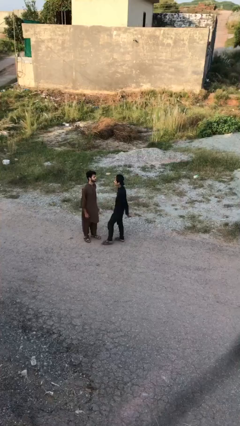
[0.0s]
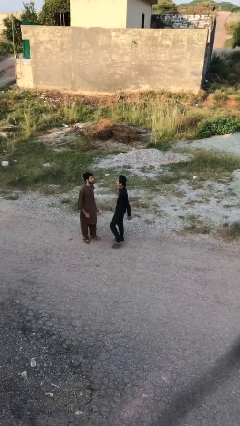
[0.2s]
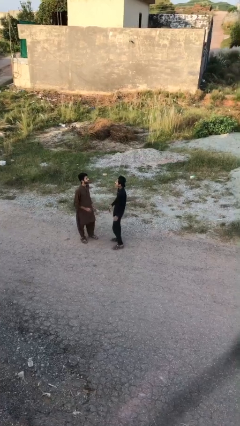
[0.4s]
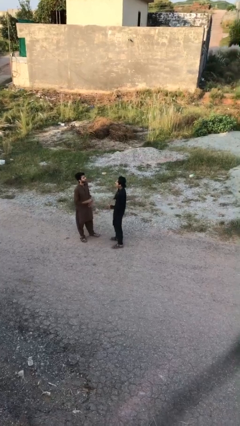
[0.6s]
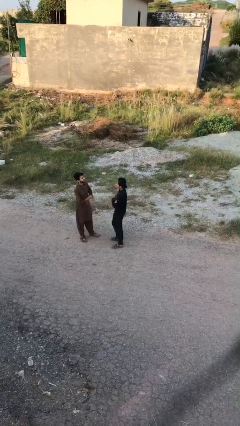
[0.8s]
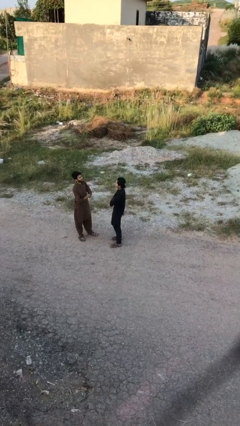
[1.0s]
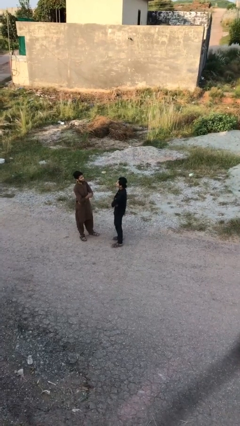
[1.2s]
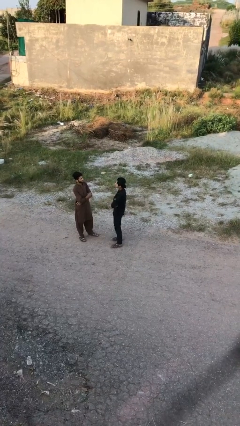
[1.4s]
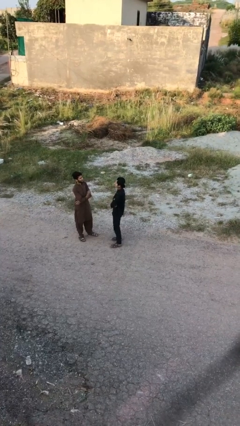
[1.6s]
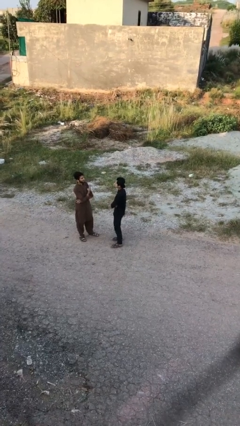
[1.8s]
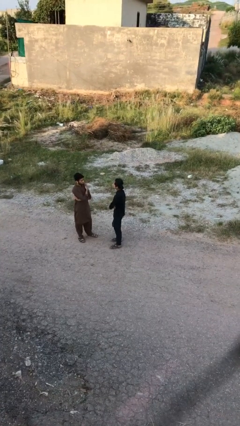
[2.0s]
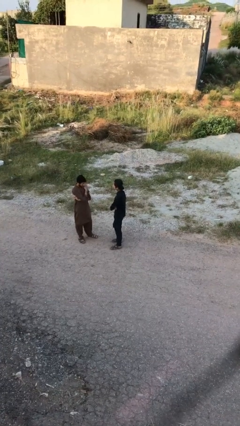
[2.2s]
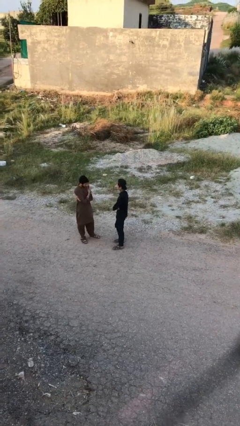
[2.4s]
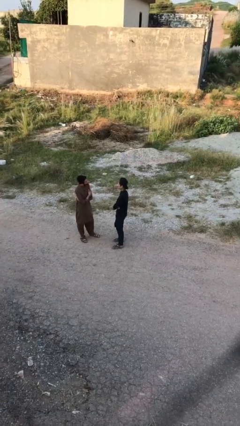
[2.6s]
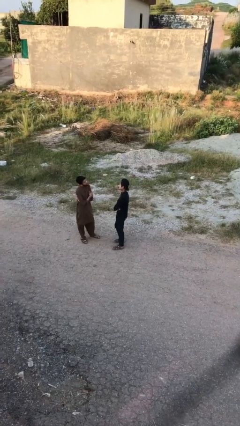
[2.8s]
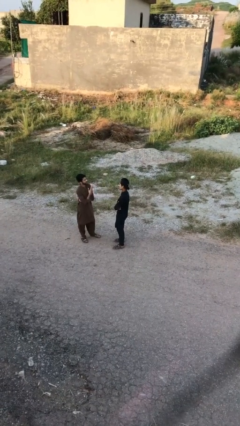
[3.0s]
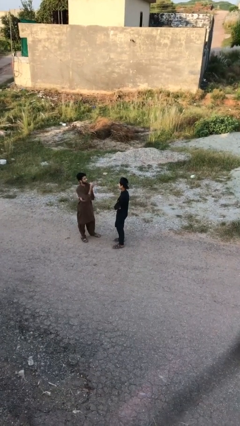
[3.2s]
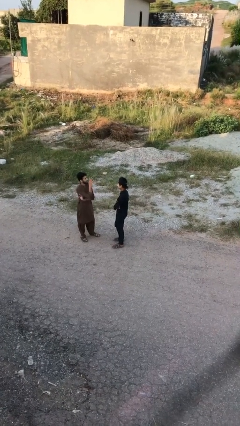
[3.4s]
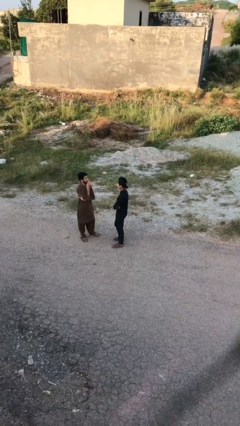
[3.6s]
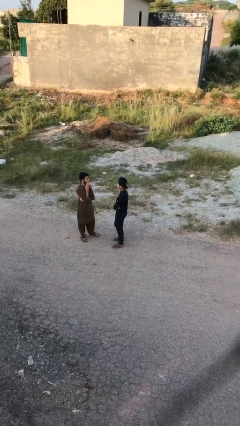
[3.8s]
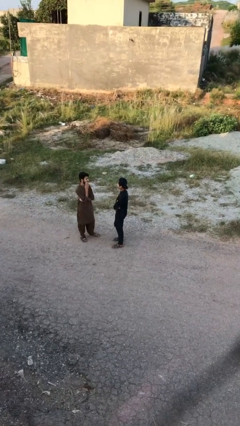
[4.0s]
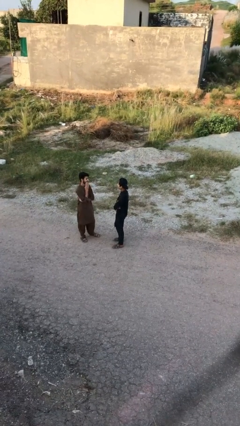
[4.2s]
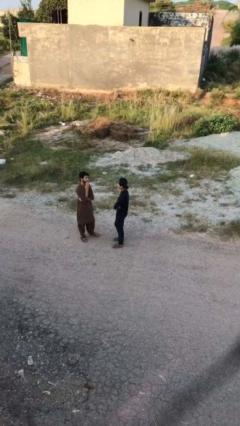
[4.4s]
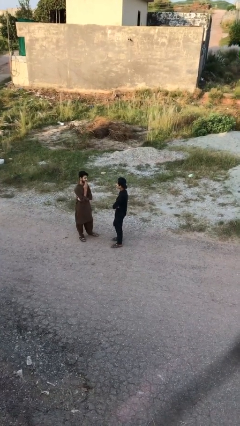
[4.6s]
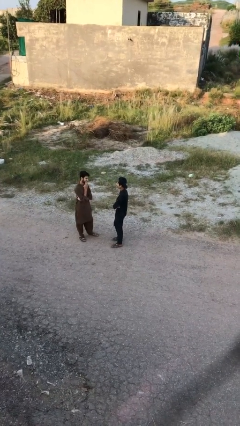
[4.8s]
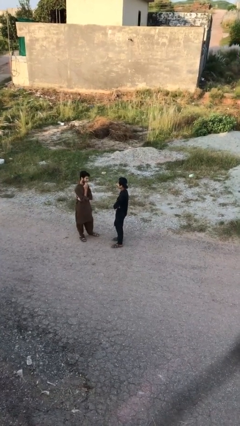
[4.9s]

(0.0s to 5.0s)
person talks to person

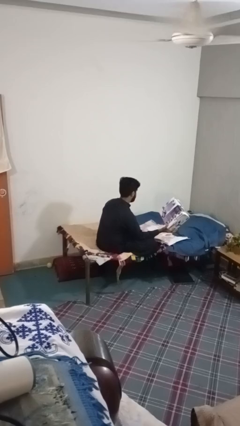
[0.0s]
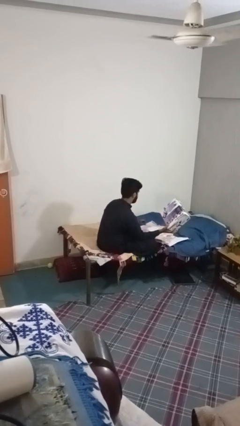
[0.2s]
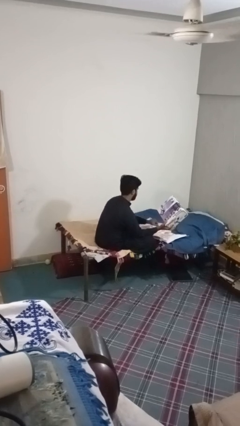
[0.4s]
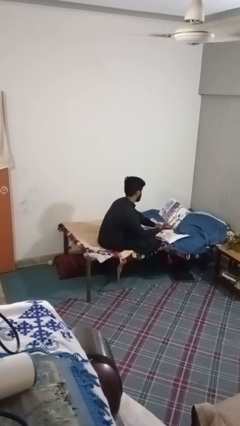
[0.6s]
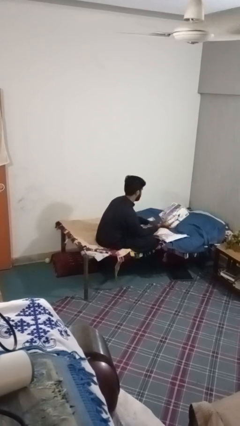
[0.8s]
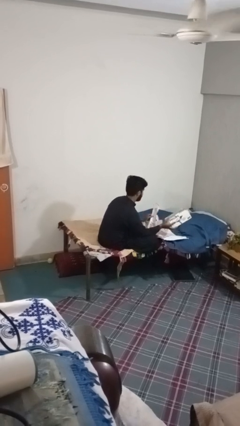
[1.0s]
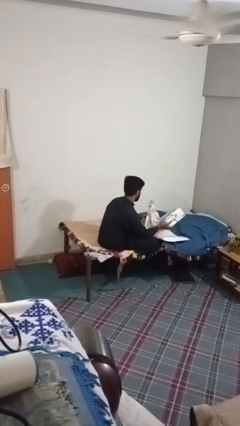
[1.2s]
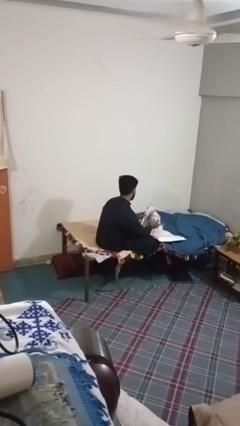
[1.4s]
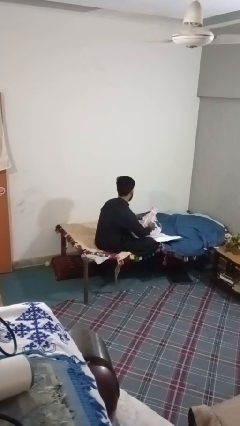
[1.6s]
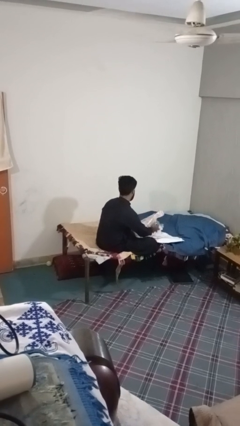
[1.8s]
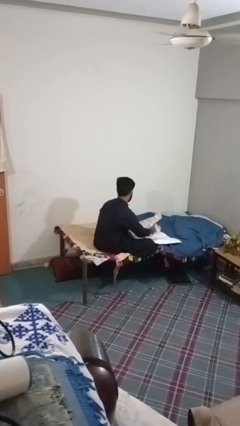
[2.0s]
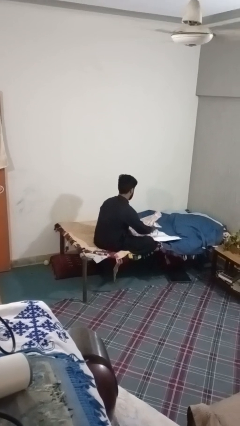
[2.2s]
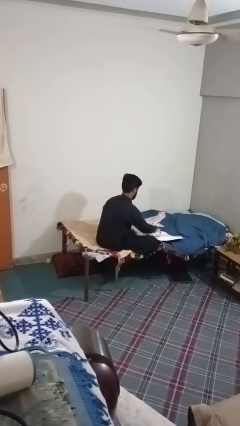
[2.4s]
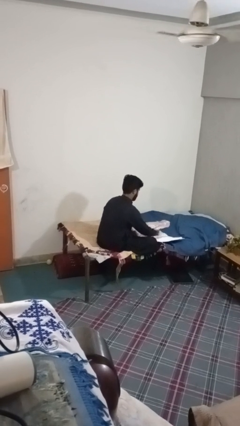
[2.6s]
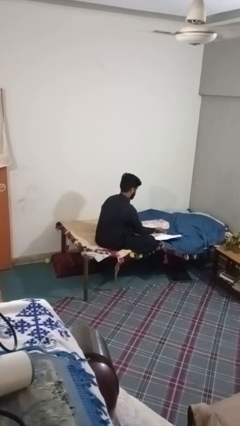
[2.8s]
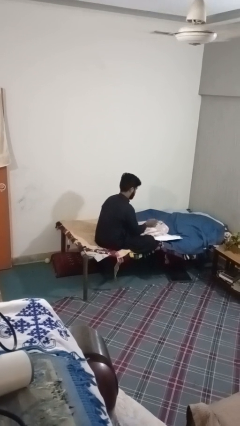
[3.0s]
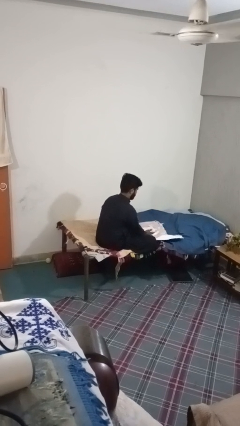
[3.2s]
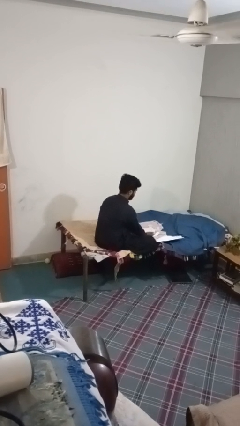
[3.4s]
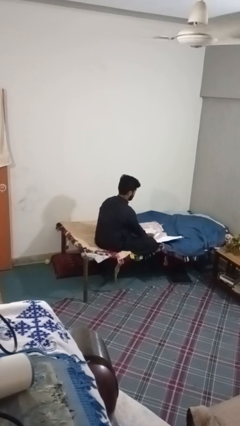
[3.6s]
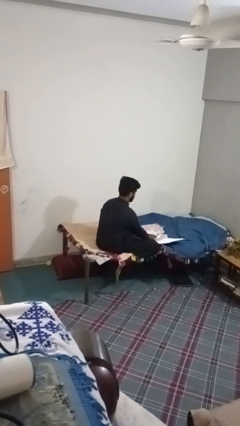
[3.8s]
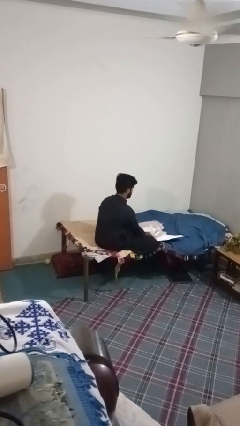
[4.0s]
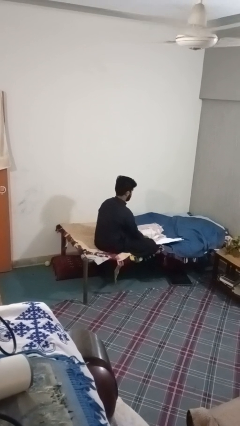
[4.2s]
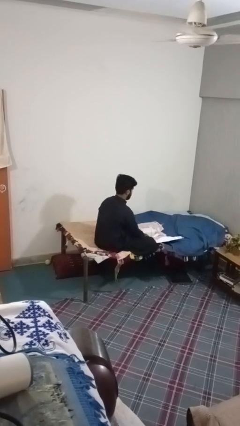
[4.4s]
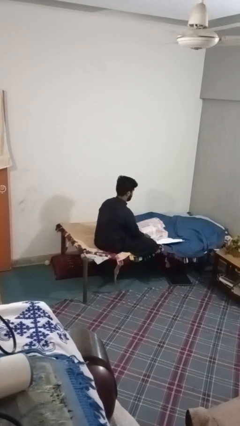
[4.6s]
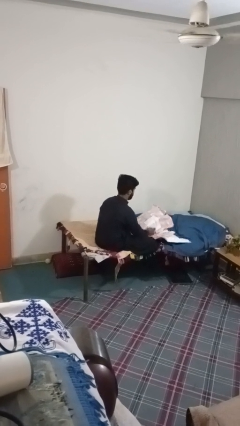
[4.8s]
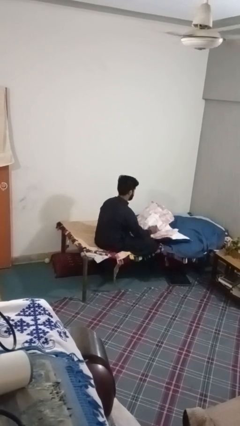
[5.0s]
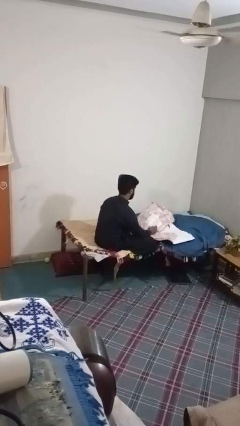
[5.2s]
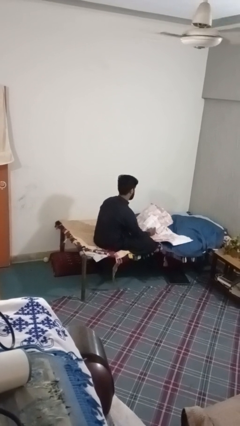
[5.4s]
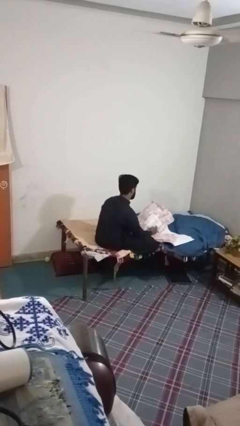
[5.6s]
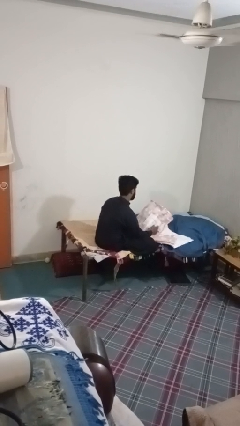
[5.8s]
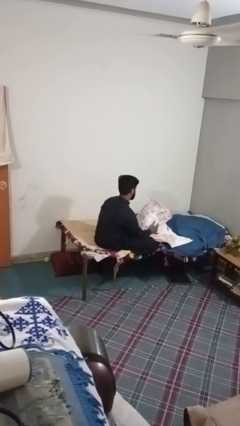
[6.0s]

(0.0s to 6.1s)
person wraps box

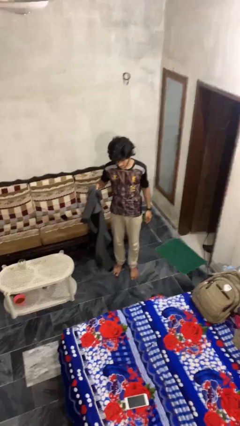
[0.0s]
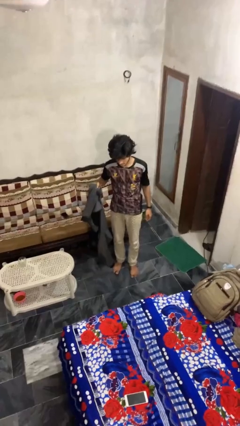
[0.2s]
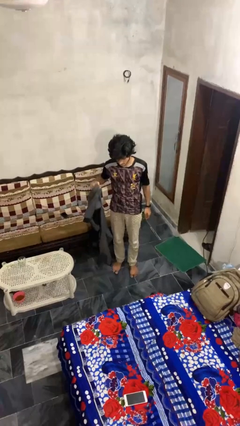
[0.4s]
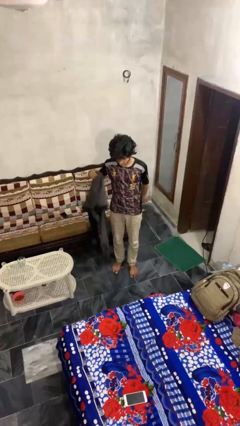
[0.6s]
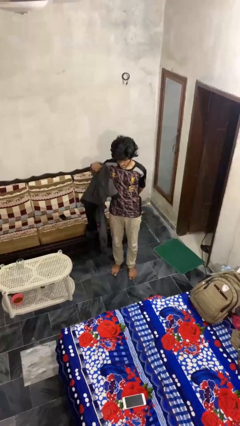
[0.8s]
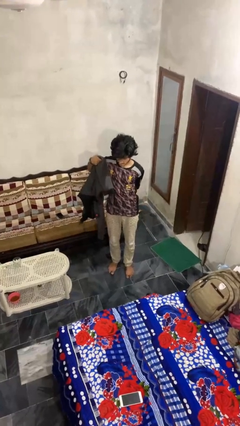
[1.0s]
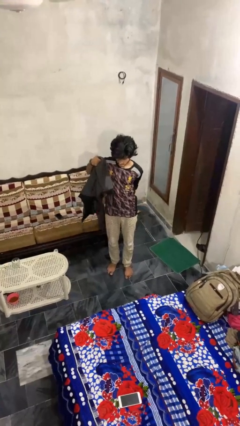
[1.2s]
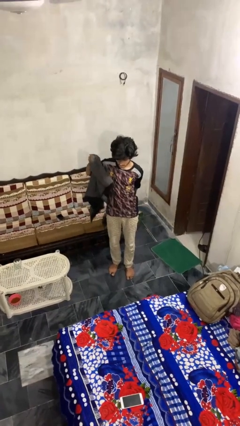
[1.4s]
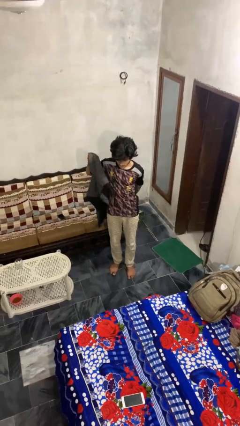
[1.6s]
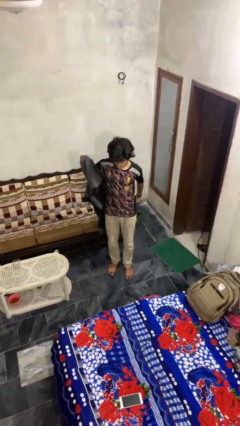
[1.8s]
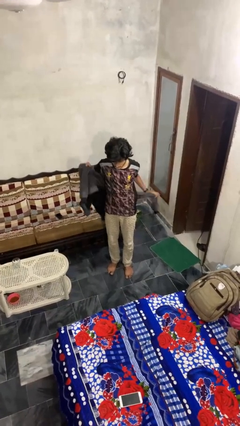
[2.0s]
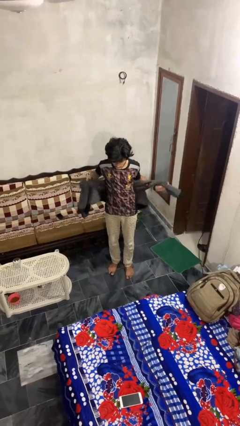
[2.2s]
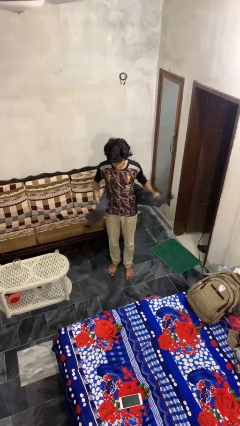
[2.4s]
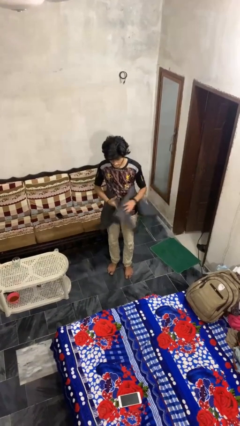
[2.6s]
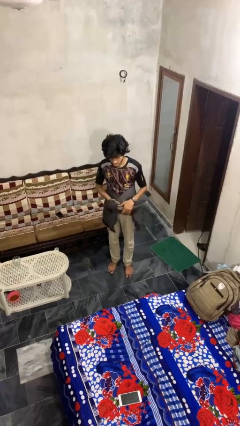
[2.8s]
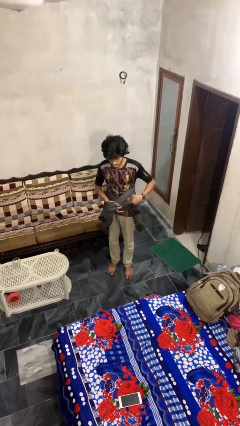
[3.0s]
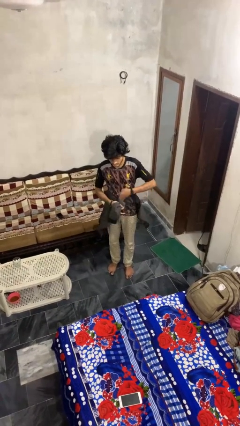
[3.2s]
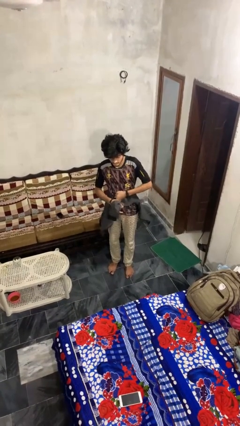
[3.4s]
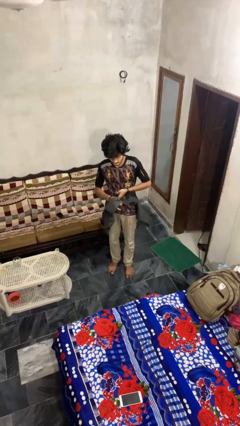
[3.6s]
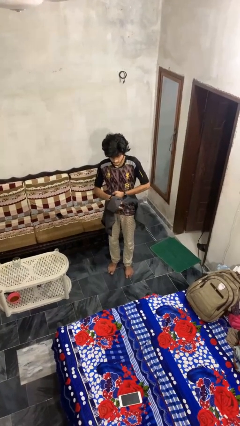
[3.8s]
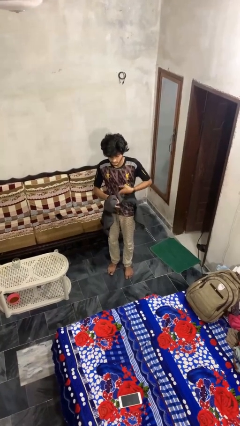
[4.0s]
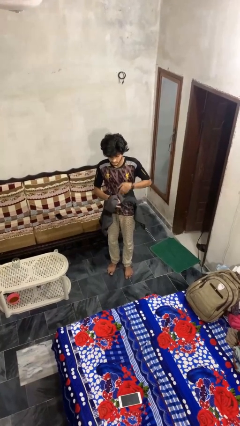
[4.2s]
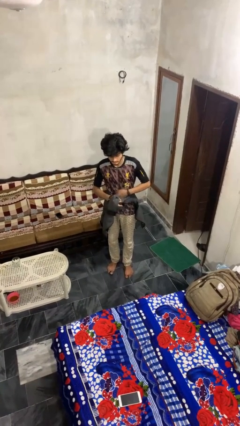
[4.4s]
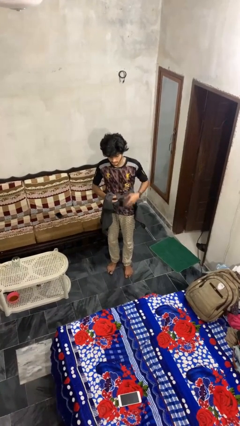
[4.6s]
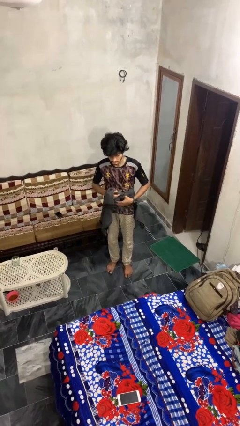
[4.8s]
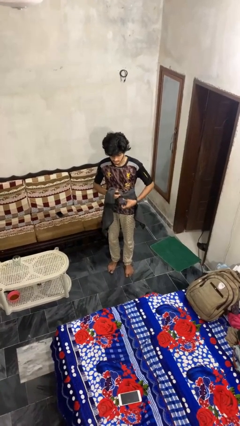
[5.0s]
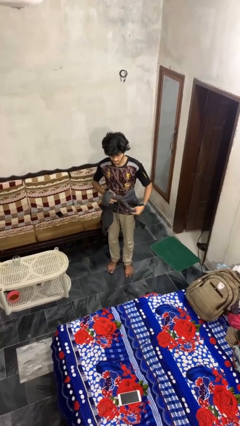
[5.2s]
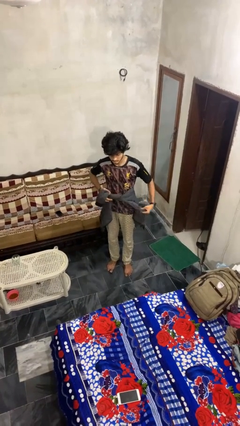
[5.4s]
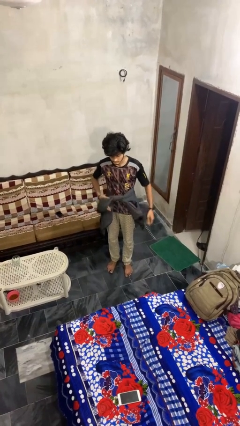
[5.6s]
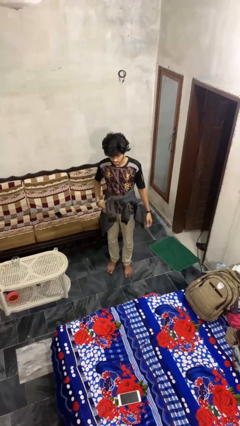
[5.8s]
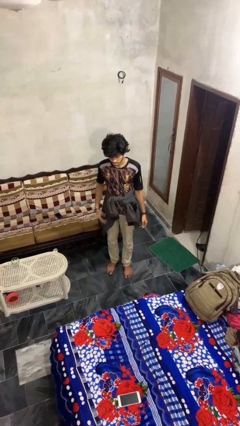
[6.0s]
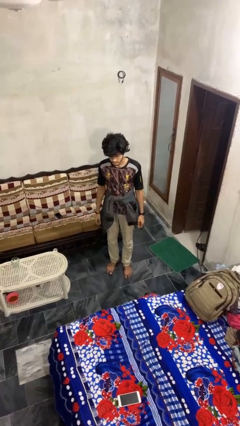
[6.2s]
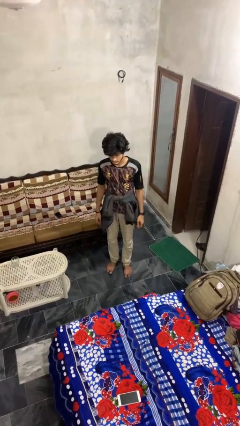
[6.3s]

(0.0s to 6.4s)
person ties jacket around waist

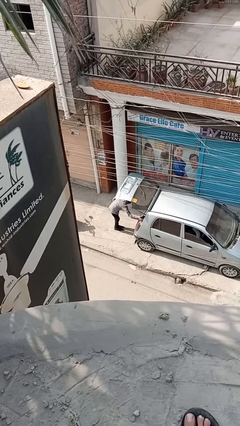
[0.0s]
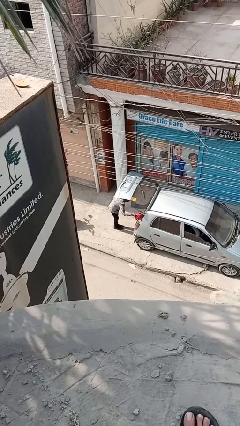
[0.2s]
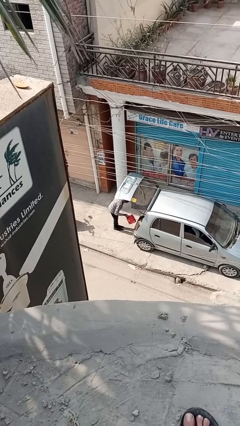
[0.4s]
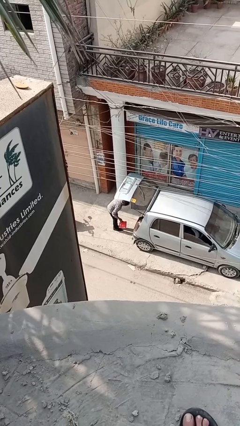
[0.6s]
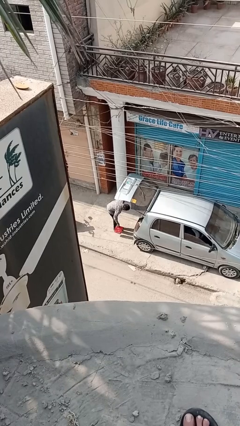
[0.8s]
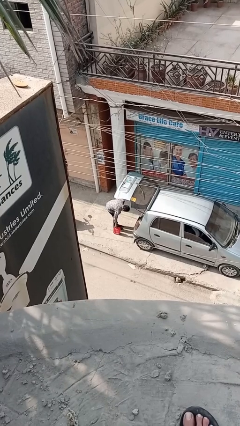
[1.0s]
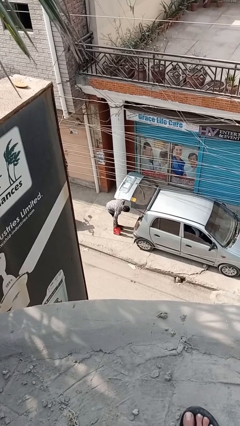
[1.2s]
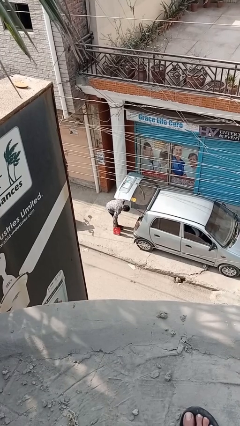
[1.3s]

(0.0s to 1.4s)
person unloads car
